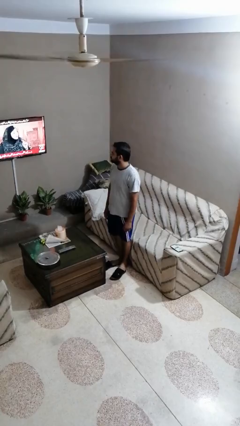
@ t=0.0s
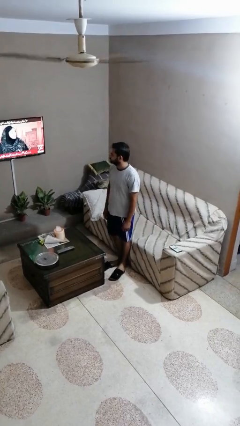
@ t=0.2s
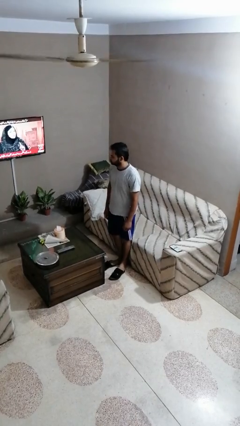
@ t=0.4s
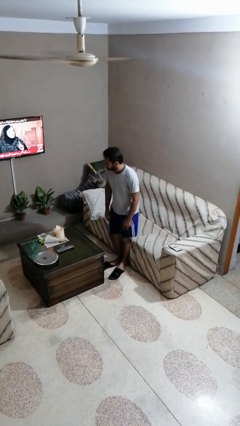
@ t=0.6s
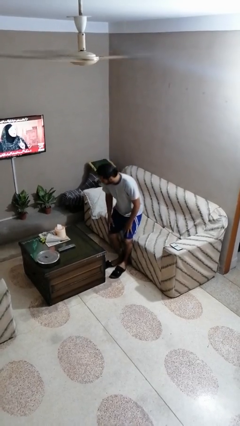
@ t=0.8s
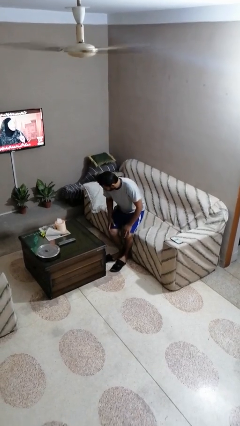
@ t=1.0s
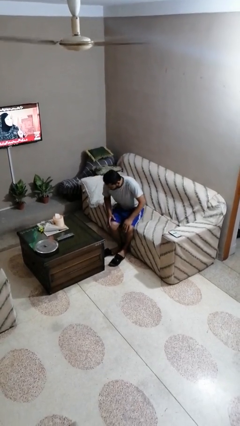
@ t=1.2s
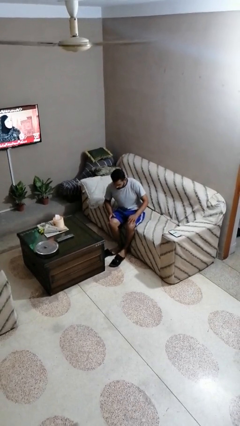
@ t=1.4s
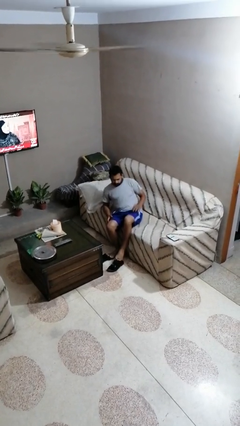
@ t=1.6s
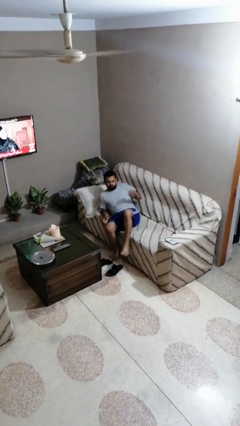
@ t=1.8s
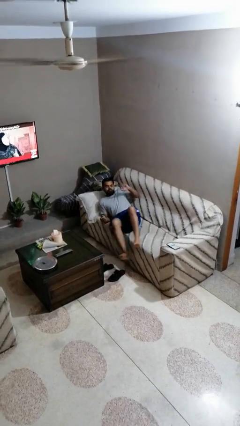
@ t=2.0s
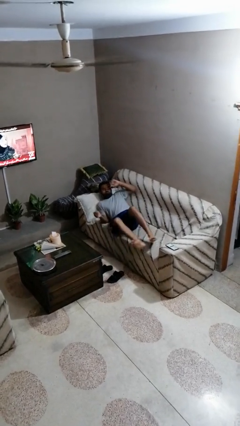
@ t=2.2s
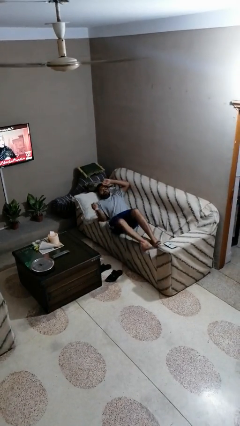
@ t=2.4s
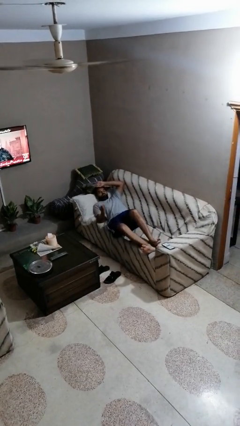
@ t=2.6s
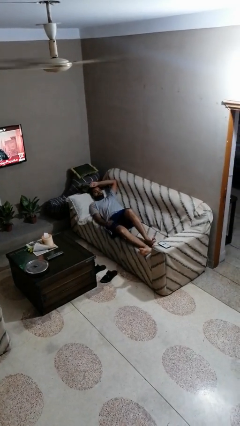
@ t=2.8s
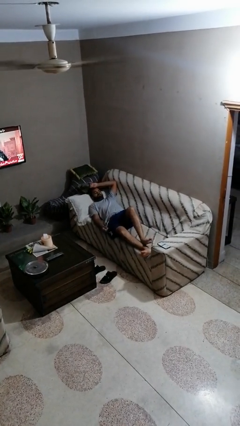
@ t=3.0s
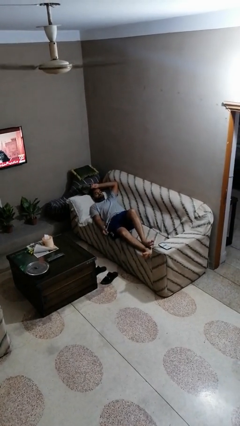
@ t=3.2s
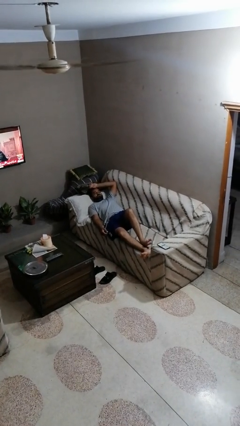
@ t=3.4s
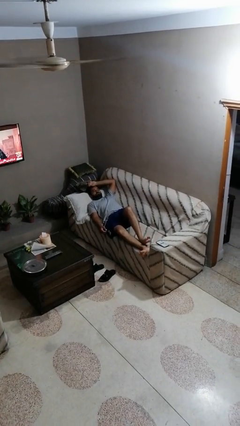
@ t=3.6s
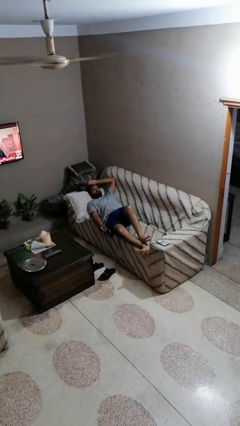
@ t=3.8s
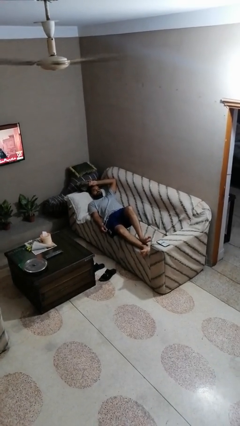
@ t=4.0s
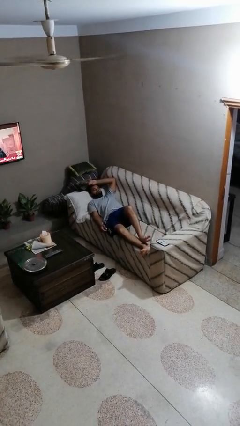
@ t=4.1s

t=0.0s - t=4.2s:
person lies down on couch

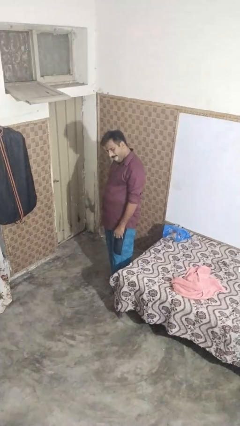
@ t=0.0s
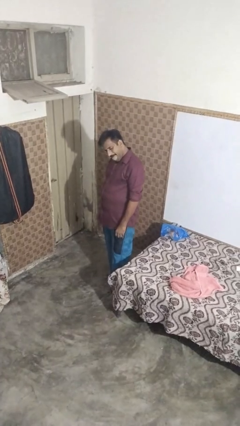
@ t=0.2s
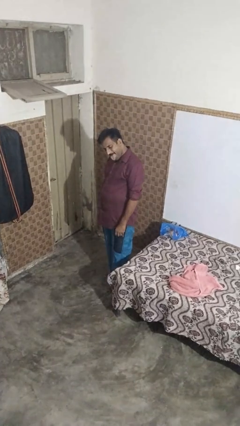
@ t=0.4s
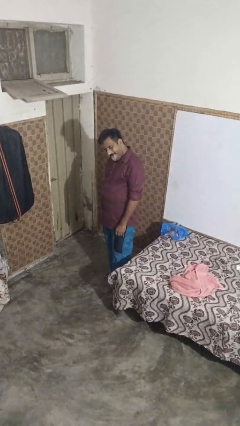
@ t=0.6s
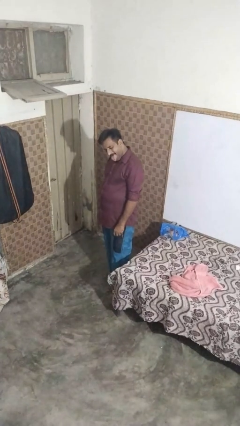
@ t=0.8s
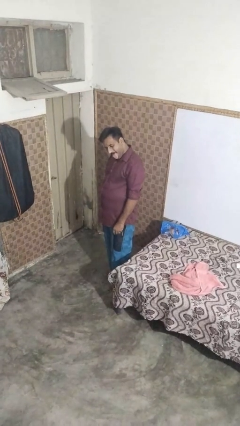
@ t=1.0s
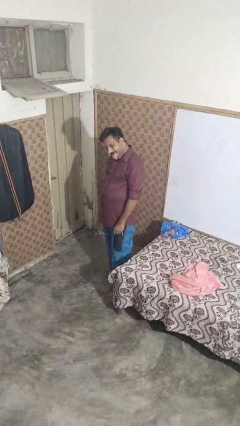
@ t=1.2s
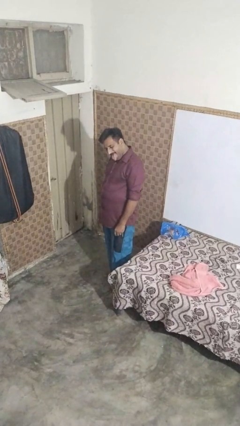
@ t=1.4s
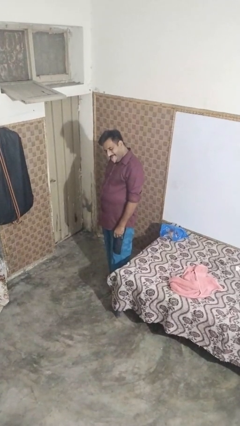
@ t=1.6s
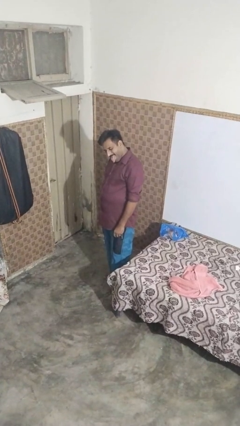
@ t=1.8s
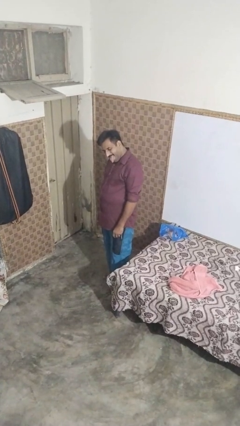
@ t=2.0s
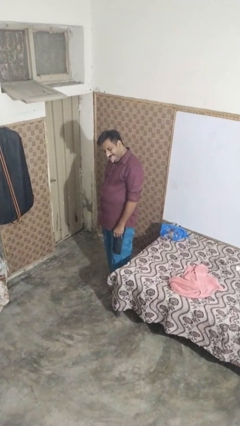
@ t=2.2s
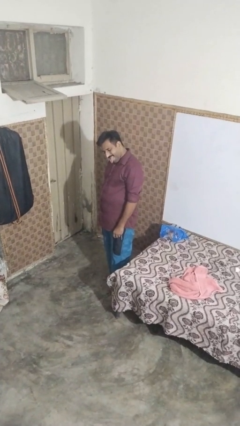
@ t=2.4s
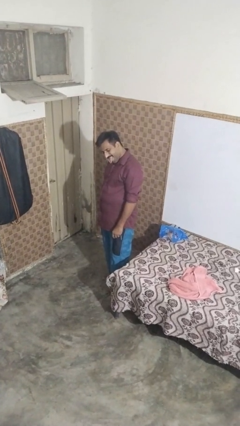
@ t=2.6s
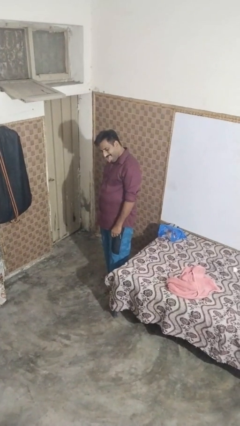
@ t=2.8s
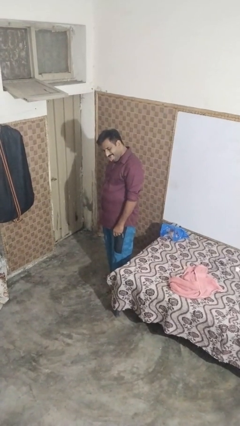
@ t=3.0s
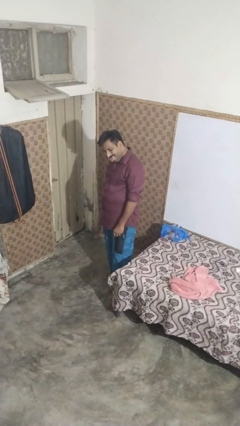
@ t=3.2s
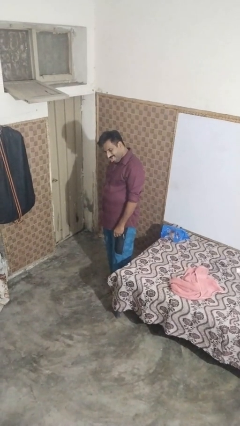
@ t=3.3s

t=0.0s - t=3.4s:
person sticks out tongue

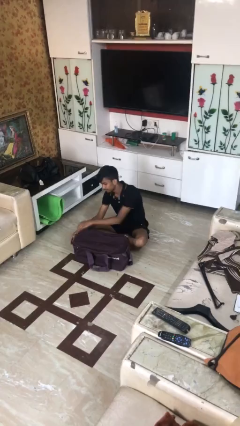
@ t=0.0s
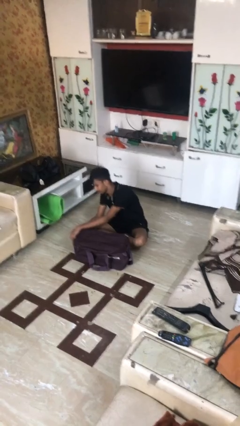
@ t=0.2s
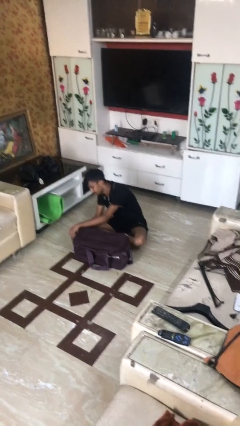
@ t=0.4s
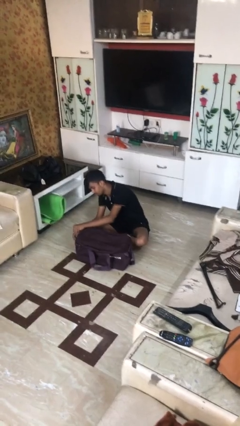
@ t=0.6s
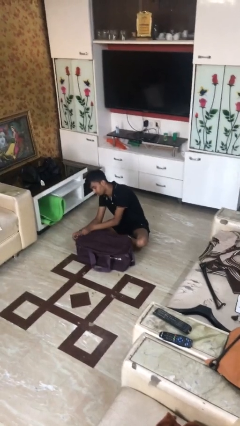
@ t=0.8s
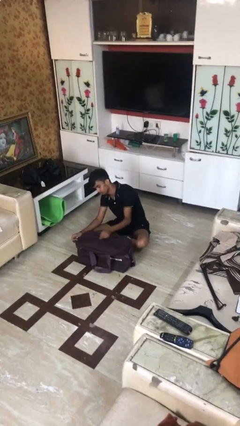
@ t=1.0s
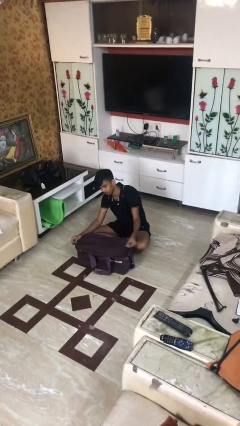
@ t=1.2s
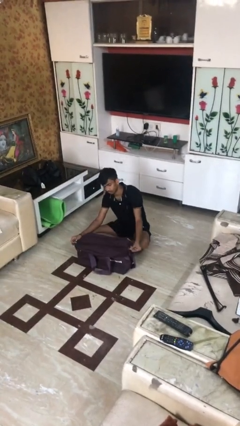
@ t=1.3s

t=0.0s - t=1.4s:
person opens suitcase

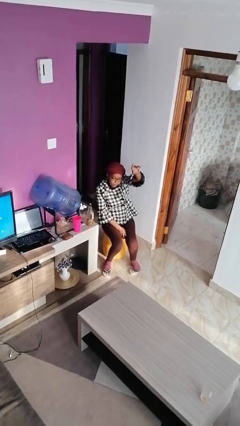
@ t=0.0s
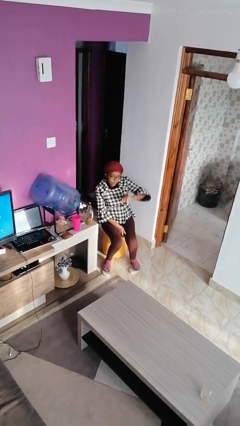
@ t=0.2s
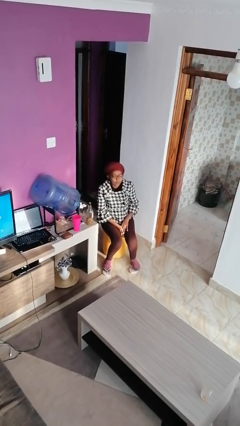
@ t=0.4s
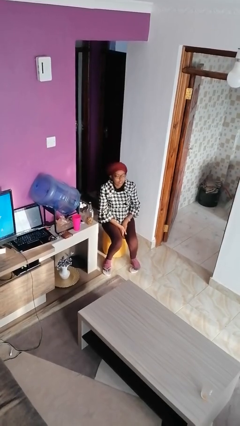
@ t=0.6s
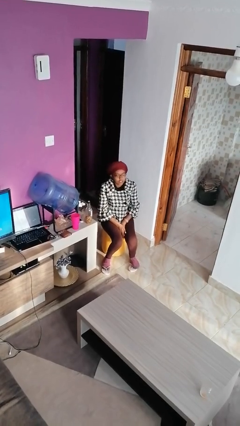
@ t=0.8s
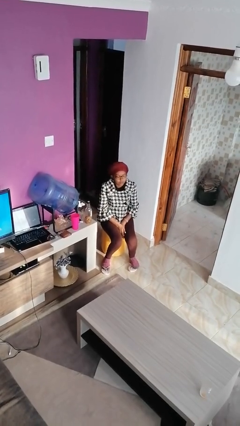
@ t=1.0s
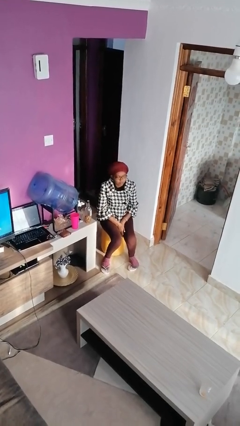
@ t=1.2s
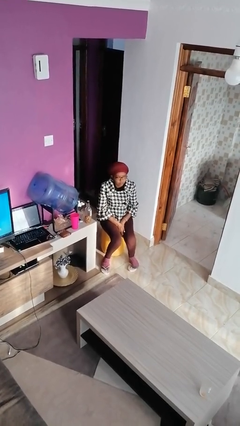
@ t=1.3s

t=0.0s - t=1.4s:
person gestures lower hand

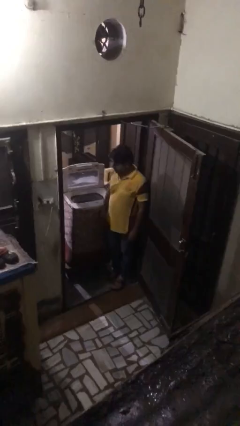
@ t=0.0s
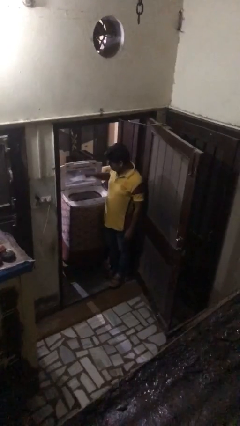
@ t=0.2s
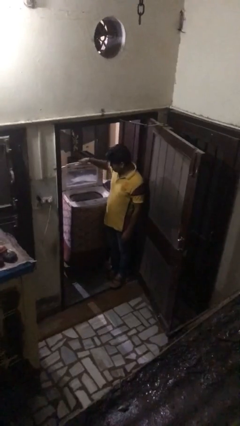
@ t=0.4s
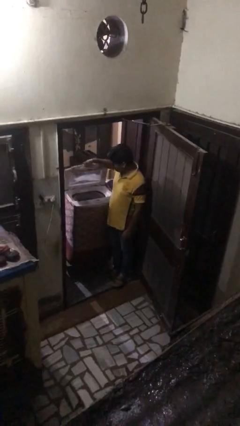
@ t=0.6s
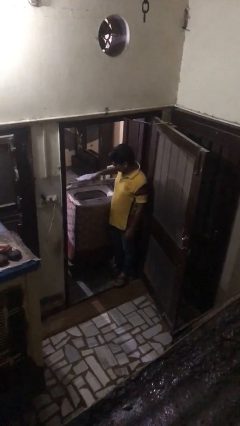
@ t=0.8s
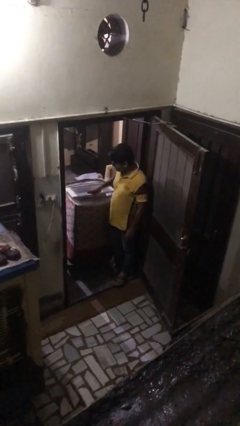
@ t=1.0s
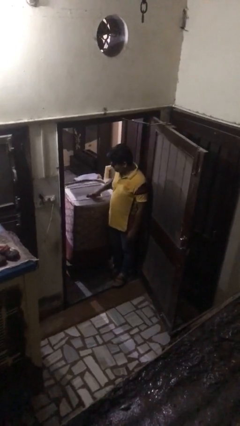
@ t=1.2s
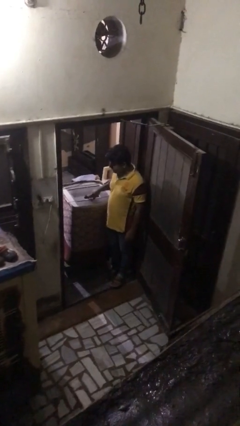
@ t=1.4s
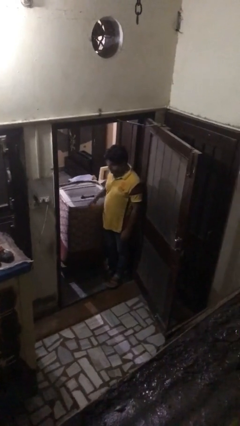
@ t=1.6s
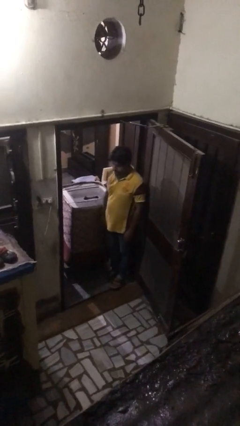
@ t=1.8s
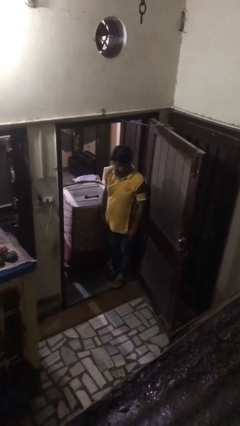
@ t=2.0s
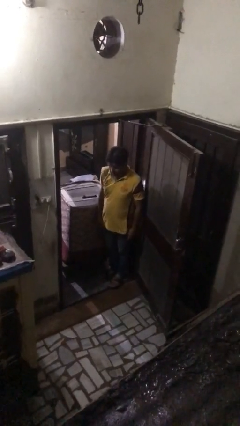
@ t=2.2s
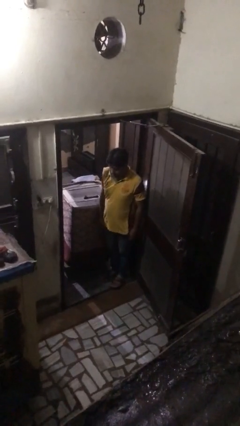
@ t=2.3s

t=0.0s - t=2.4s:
person closes clothes washer

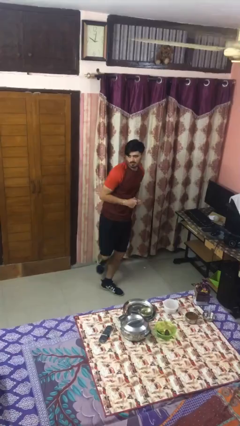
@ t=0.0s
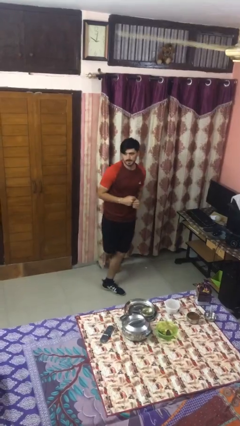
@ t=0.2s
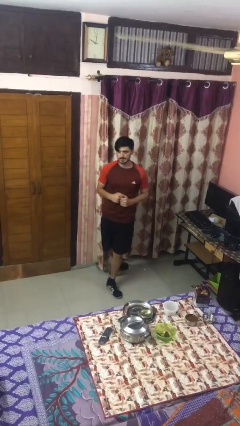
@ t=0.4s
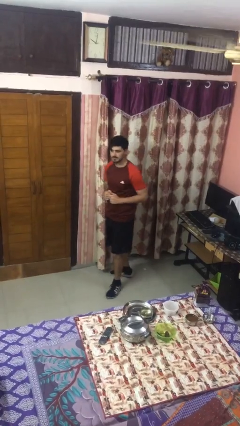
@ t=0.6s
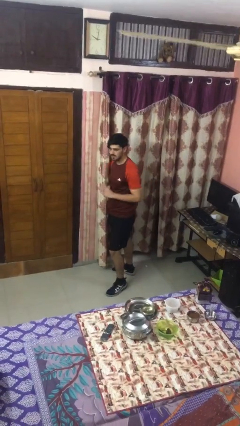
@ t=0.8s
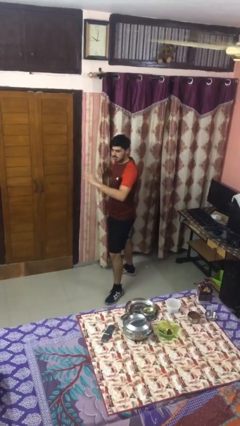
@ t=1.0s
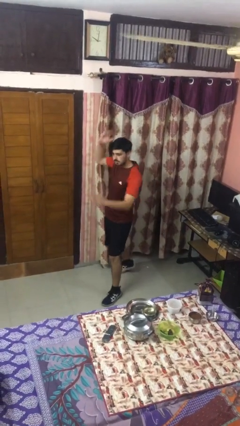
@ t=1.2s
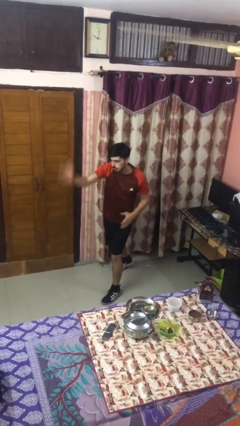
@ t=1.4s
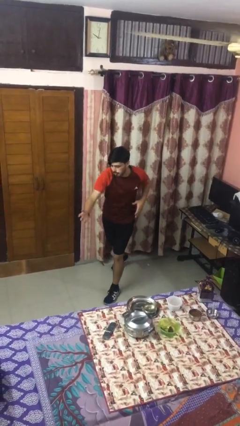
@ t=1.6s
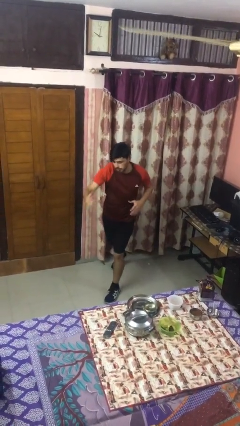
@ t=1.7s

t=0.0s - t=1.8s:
person karate chop

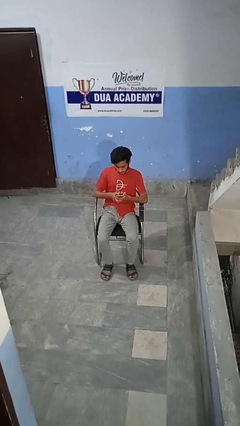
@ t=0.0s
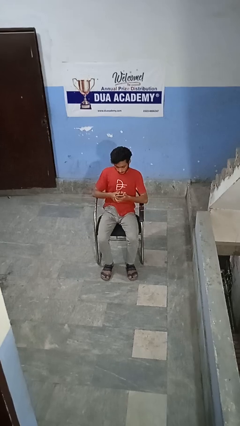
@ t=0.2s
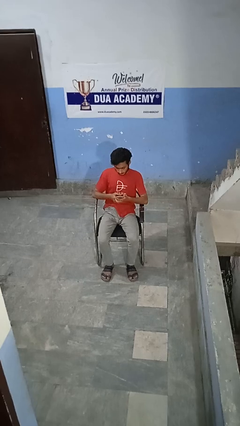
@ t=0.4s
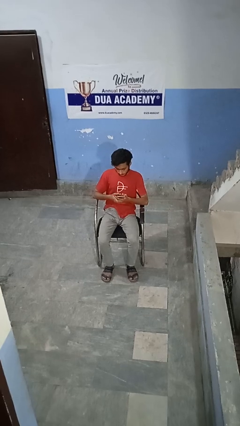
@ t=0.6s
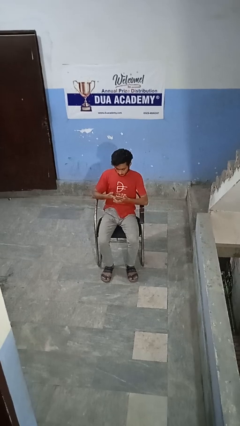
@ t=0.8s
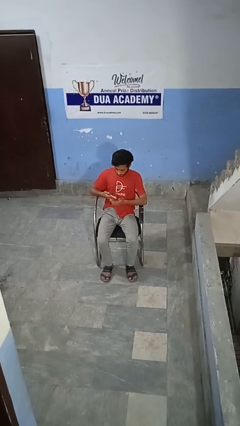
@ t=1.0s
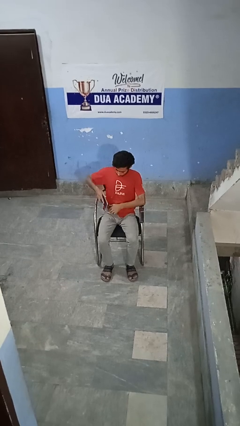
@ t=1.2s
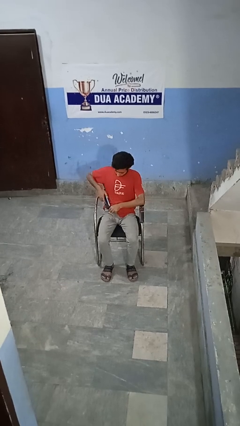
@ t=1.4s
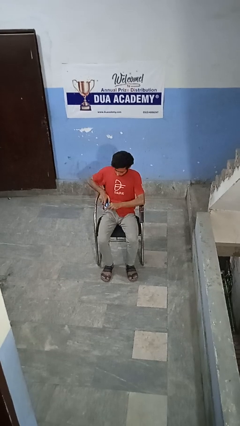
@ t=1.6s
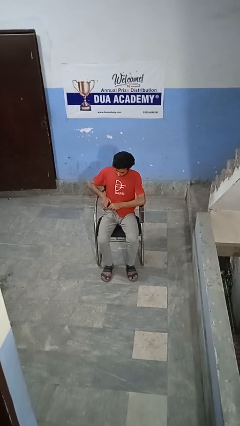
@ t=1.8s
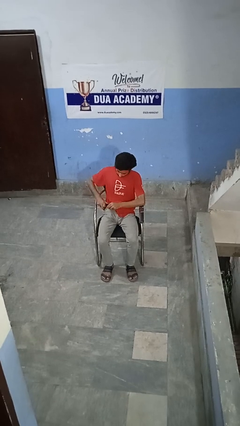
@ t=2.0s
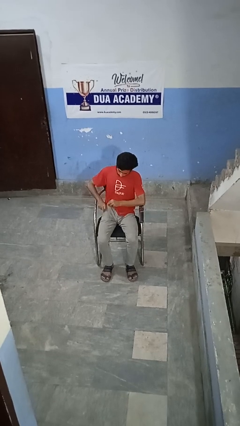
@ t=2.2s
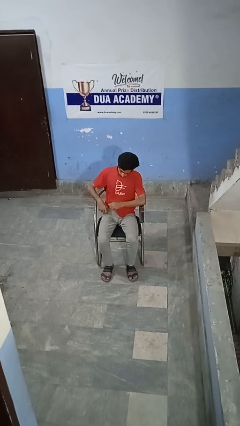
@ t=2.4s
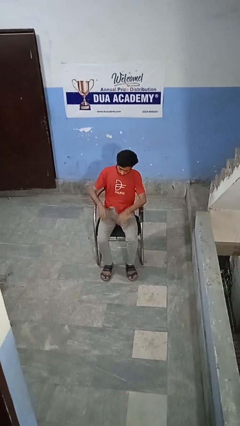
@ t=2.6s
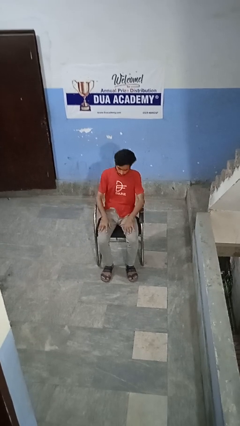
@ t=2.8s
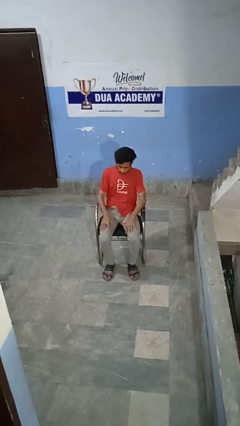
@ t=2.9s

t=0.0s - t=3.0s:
person puts phone into pocket
